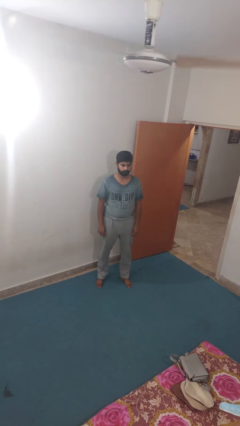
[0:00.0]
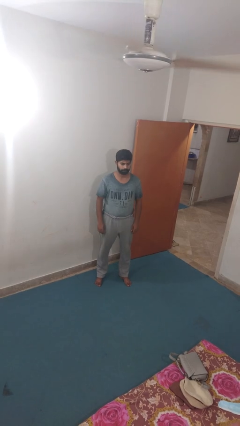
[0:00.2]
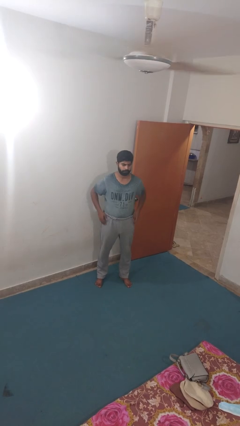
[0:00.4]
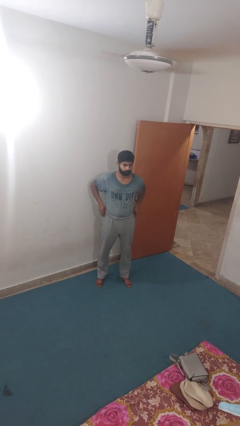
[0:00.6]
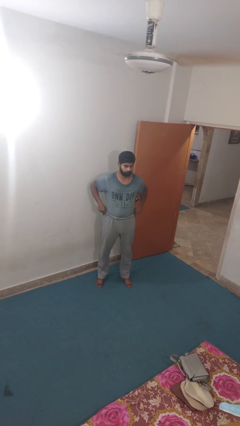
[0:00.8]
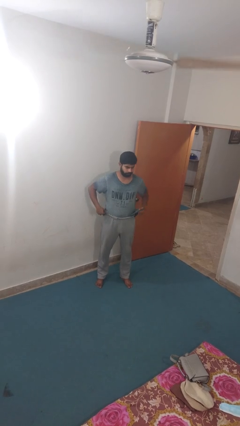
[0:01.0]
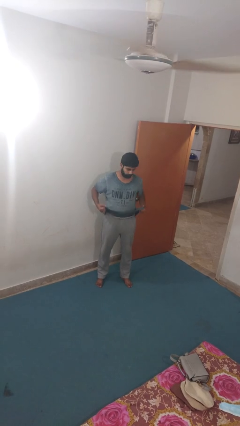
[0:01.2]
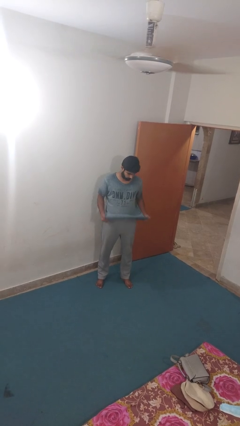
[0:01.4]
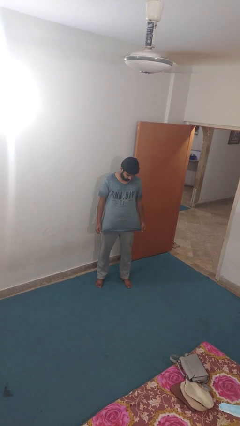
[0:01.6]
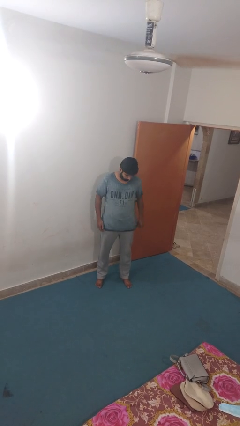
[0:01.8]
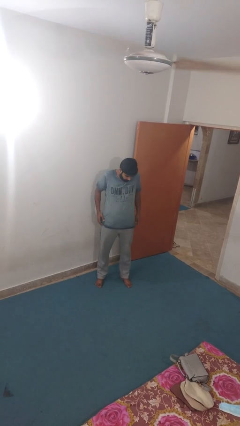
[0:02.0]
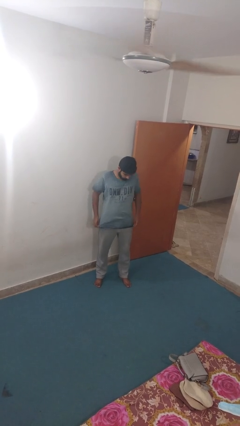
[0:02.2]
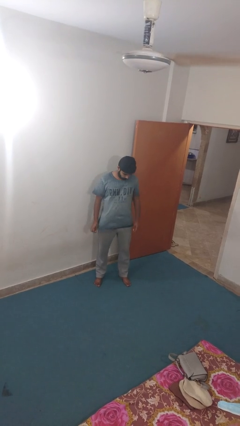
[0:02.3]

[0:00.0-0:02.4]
person untucks shirt

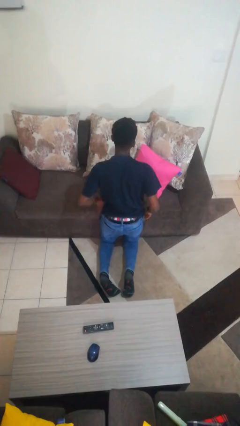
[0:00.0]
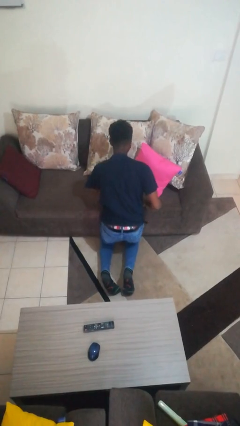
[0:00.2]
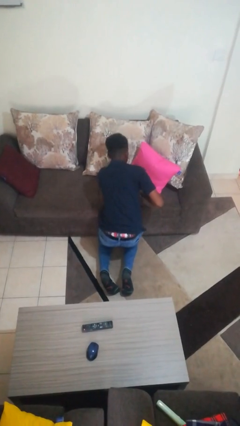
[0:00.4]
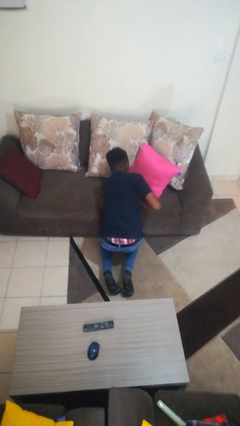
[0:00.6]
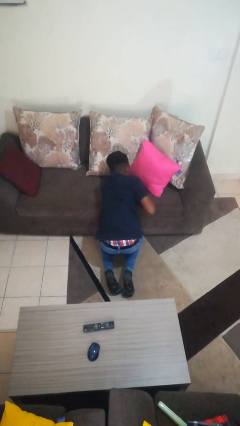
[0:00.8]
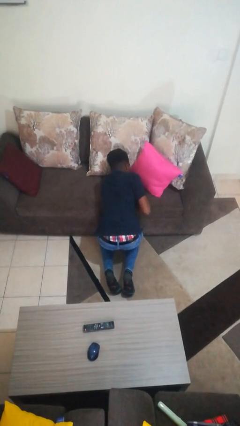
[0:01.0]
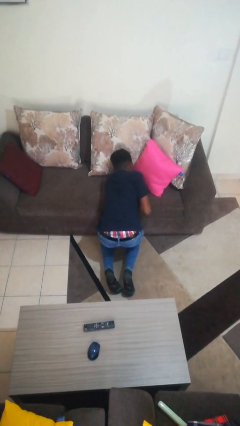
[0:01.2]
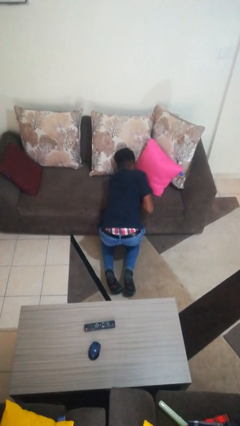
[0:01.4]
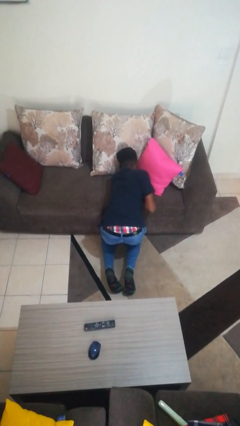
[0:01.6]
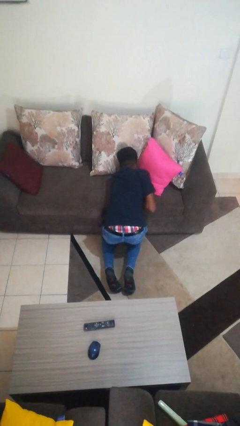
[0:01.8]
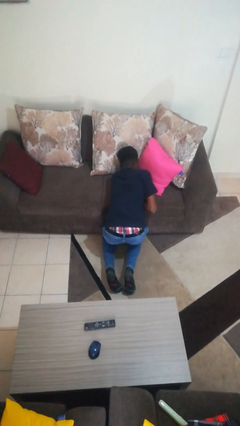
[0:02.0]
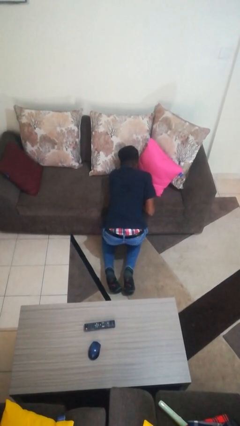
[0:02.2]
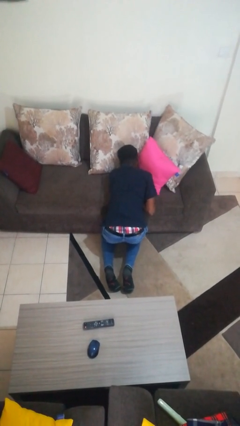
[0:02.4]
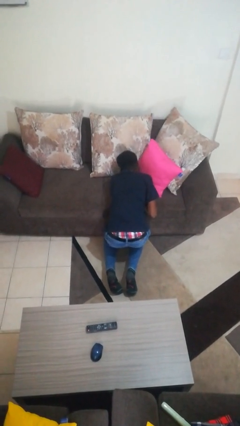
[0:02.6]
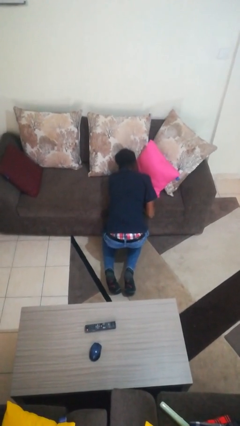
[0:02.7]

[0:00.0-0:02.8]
person searches in couch

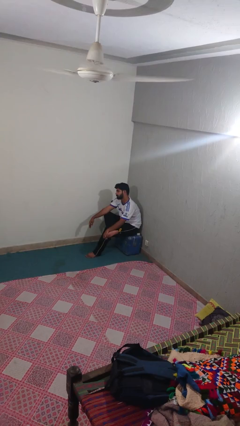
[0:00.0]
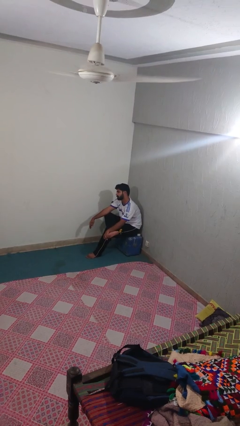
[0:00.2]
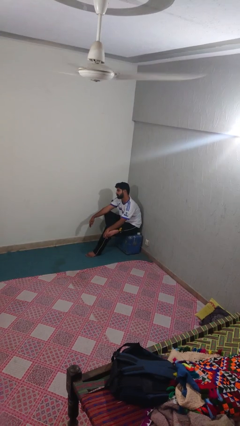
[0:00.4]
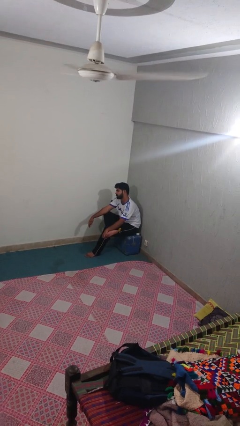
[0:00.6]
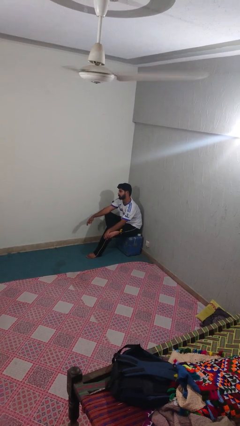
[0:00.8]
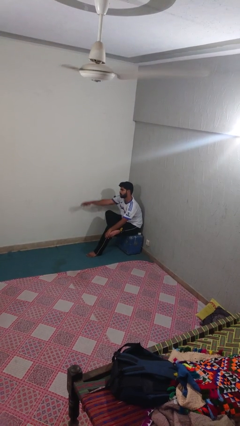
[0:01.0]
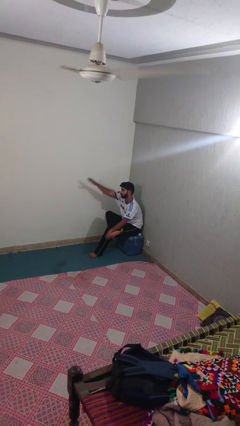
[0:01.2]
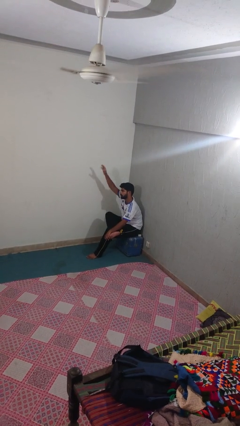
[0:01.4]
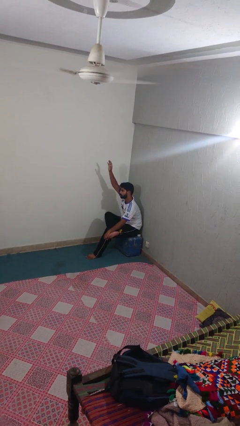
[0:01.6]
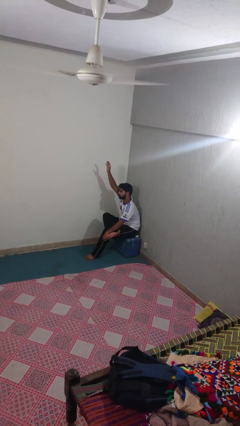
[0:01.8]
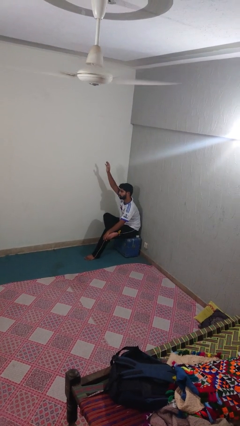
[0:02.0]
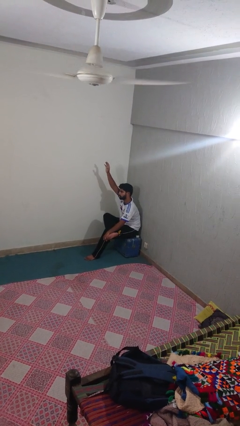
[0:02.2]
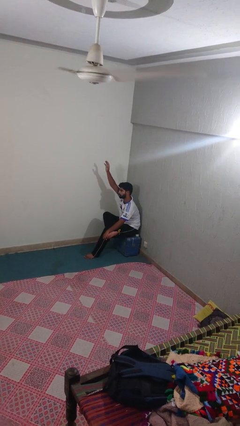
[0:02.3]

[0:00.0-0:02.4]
person gestures raise hand

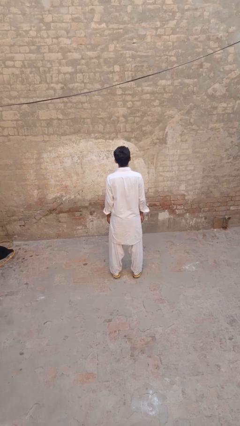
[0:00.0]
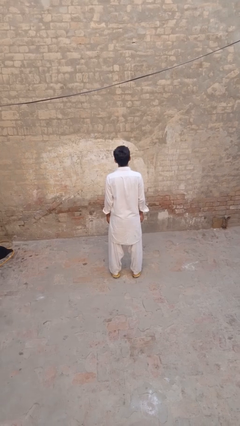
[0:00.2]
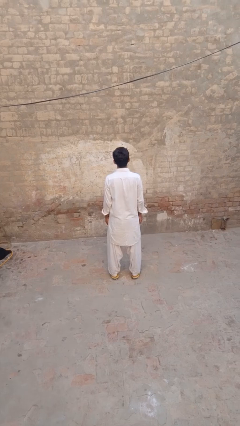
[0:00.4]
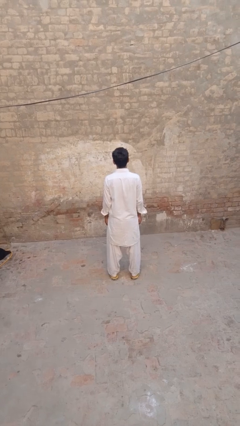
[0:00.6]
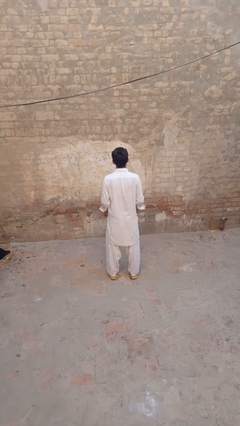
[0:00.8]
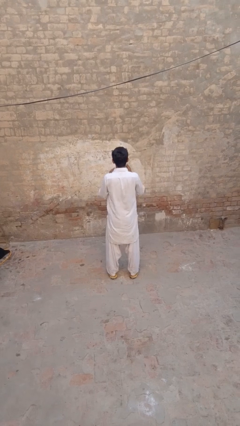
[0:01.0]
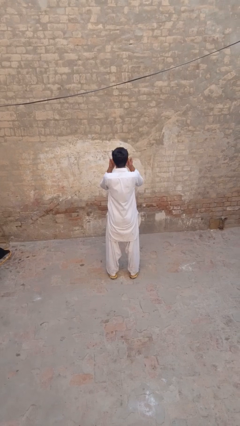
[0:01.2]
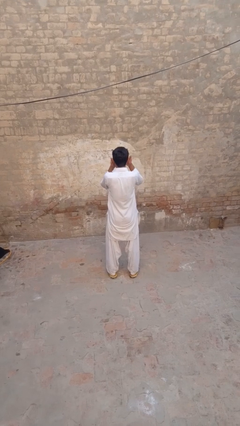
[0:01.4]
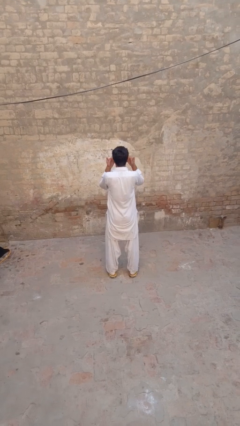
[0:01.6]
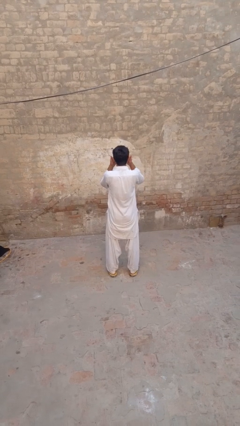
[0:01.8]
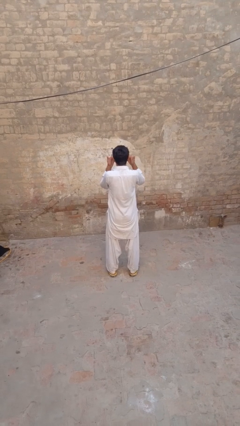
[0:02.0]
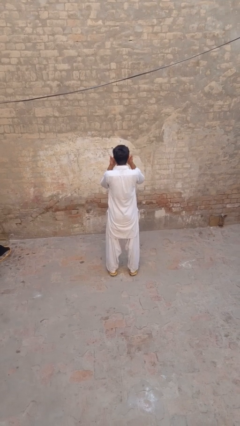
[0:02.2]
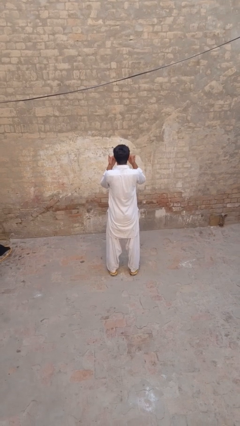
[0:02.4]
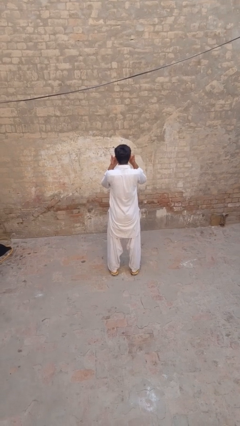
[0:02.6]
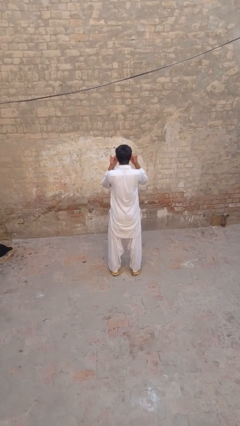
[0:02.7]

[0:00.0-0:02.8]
person shades eyes

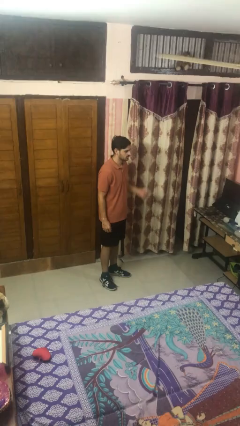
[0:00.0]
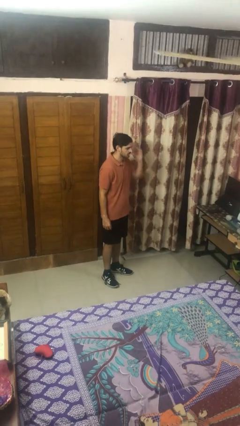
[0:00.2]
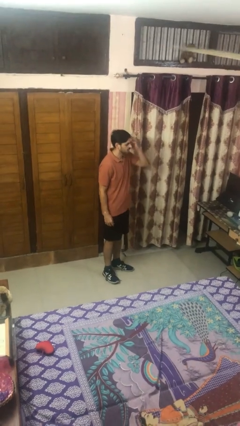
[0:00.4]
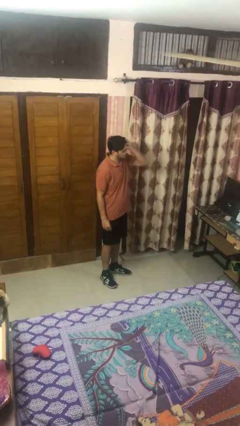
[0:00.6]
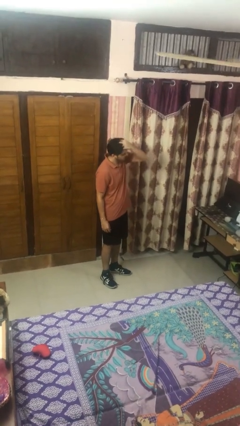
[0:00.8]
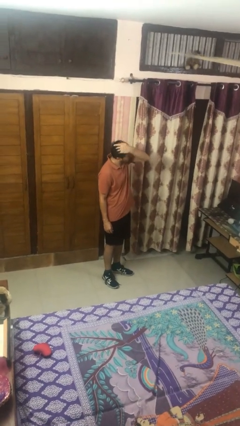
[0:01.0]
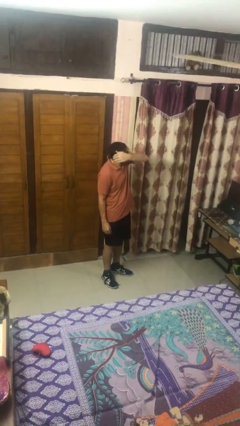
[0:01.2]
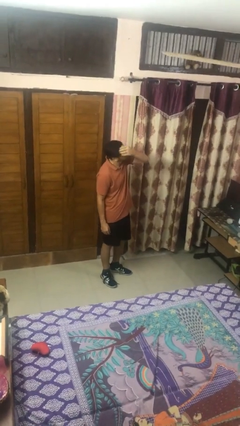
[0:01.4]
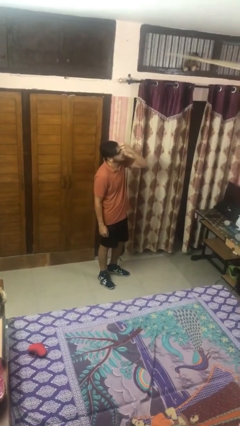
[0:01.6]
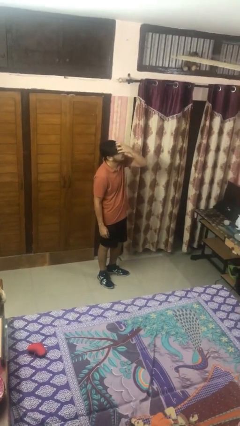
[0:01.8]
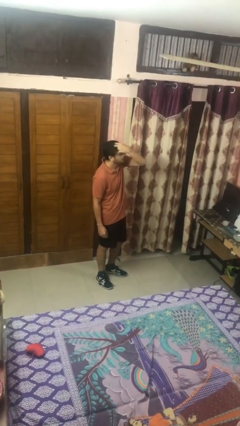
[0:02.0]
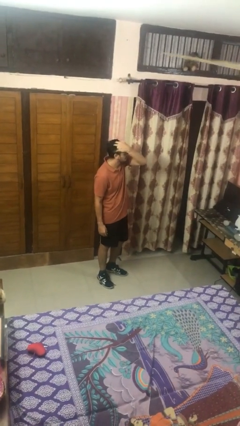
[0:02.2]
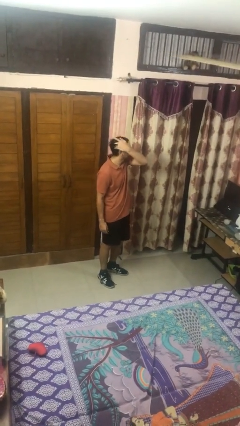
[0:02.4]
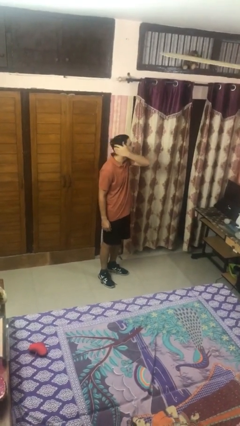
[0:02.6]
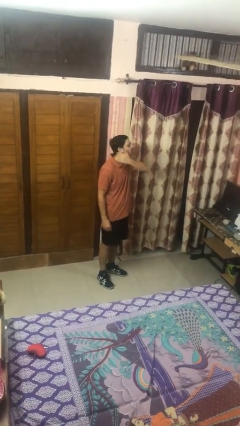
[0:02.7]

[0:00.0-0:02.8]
person strokes hair

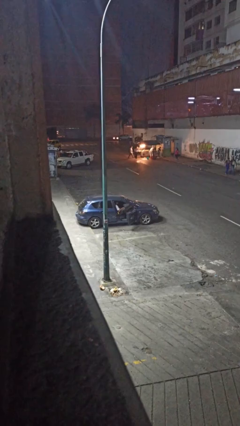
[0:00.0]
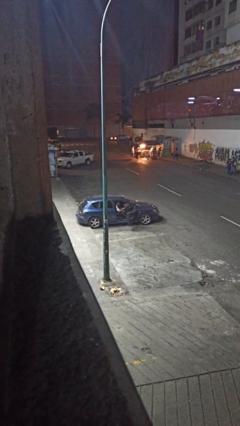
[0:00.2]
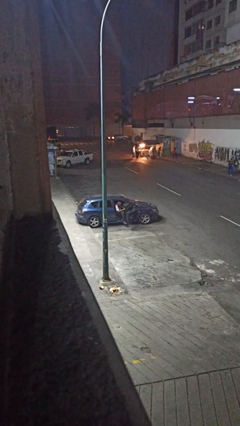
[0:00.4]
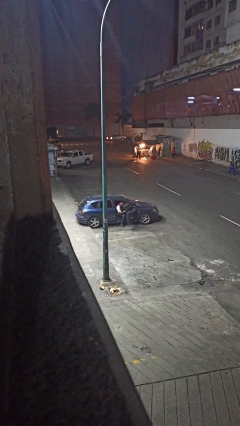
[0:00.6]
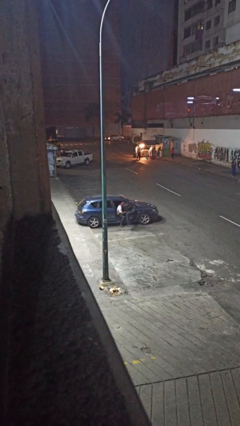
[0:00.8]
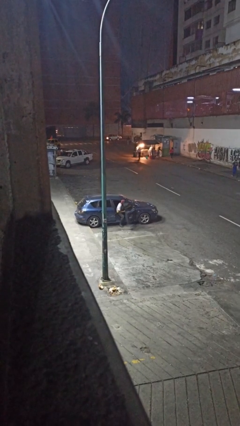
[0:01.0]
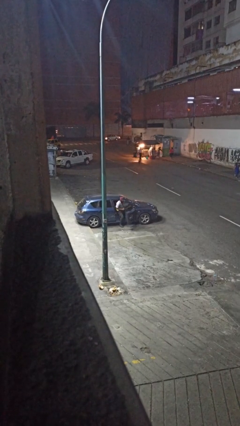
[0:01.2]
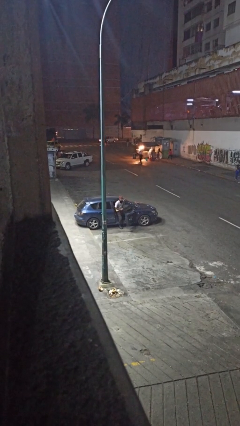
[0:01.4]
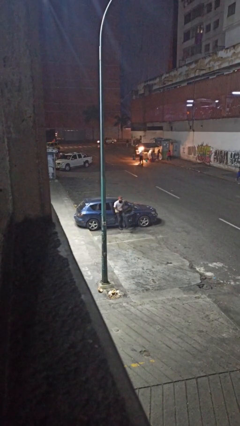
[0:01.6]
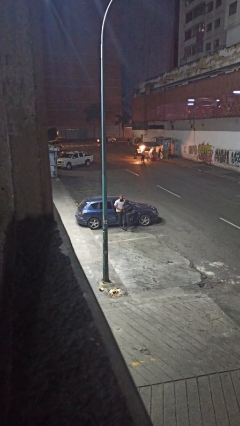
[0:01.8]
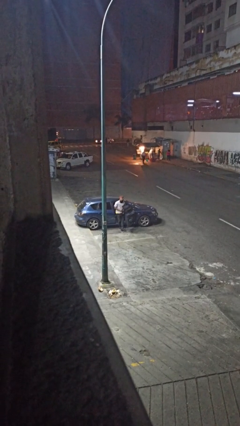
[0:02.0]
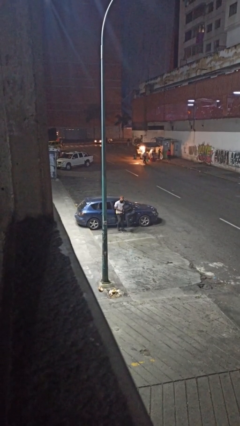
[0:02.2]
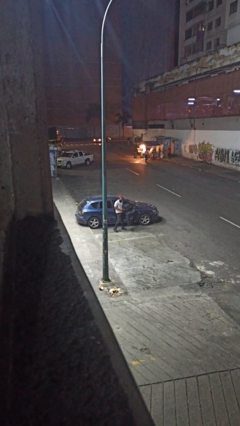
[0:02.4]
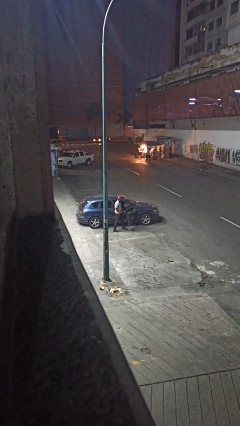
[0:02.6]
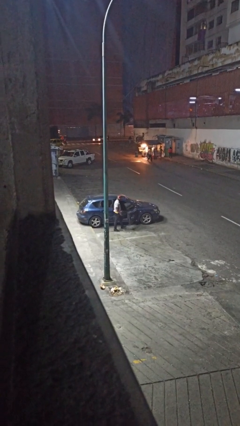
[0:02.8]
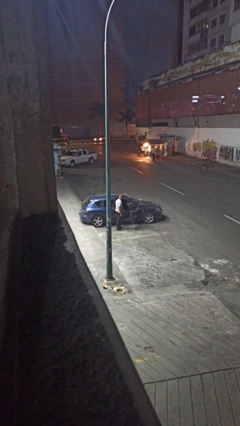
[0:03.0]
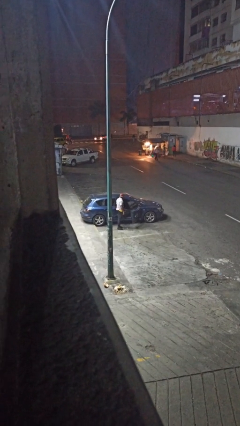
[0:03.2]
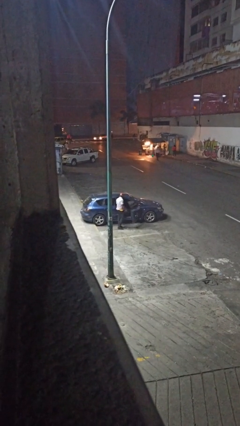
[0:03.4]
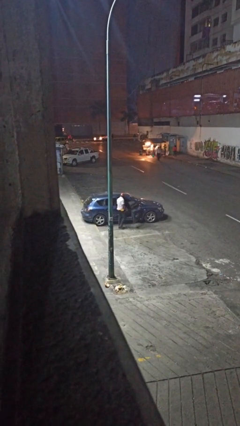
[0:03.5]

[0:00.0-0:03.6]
person exits car

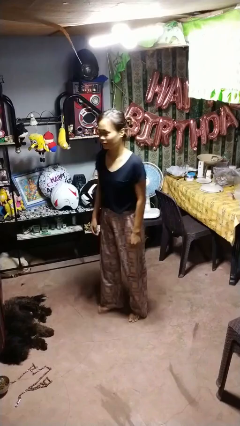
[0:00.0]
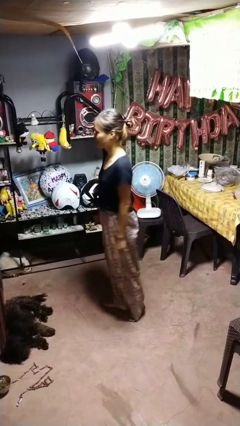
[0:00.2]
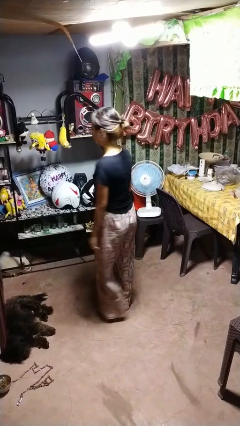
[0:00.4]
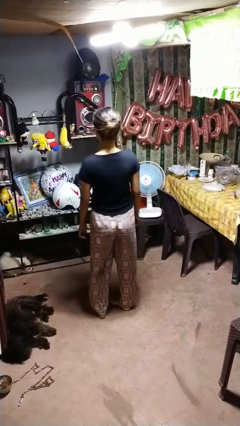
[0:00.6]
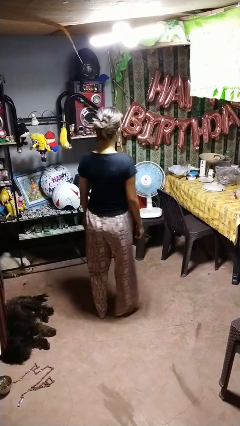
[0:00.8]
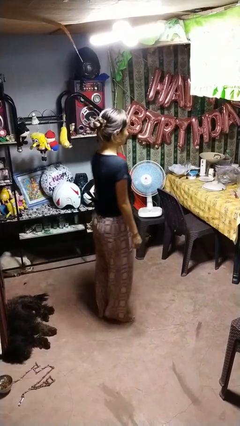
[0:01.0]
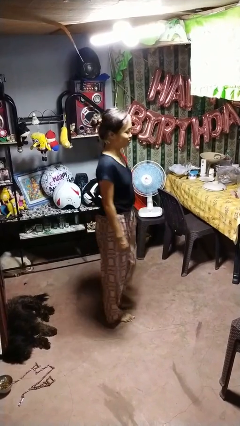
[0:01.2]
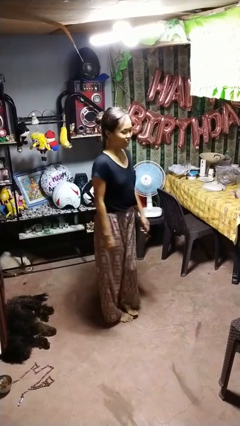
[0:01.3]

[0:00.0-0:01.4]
person twirls
